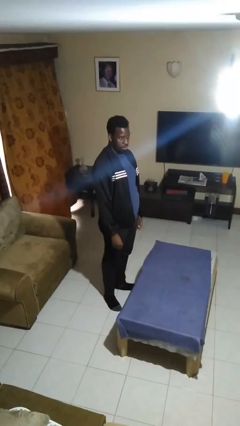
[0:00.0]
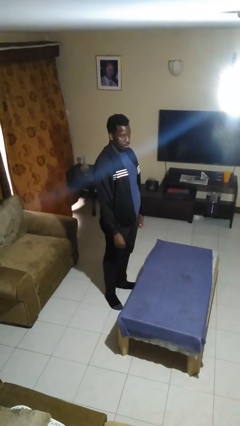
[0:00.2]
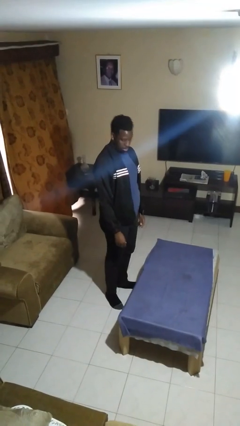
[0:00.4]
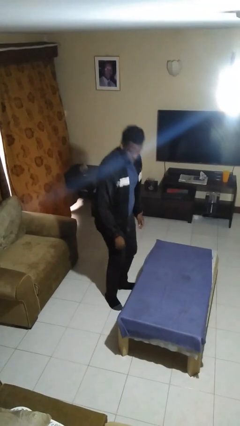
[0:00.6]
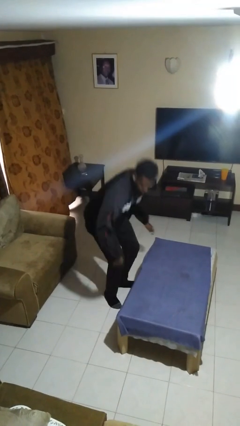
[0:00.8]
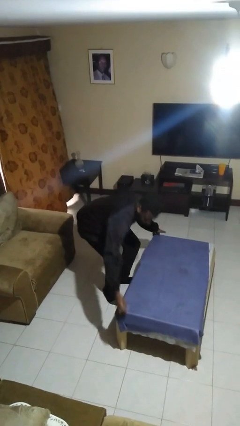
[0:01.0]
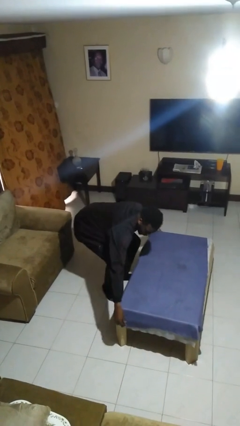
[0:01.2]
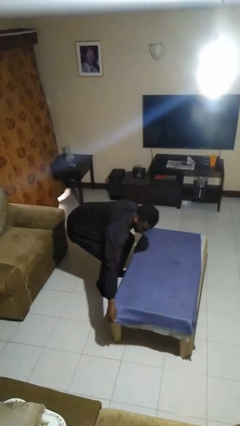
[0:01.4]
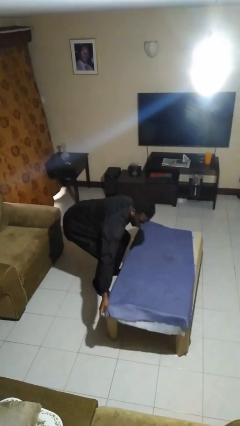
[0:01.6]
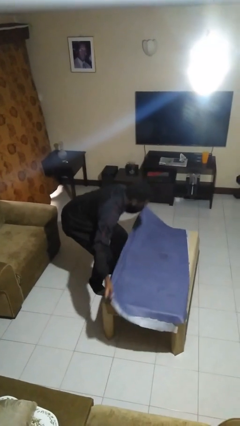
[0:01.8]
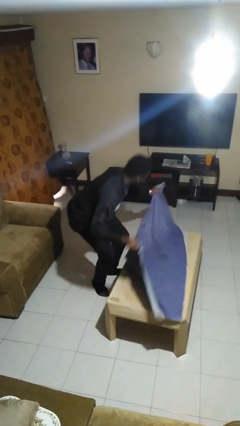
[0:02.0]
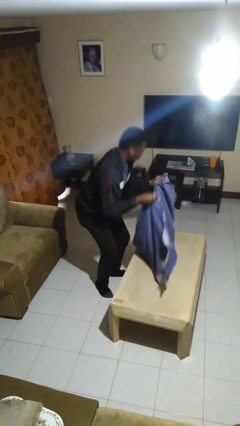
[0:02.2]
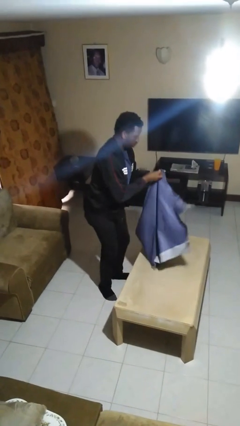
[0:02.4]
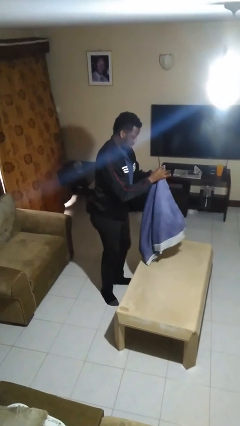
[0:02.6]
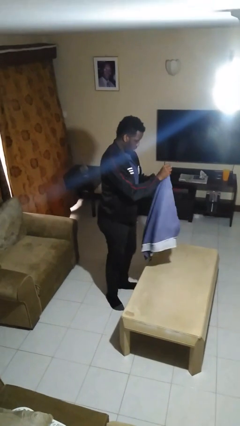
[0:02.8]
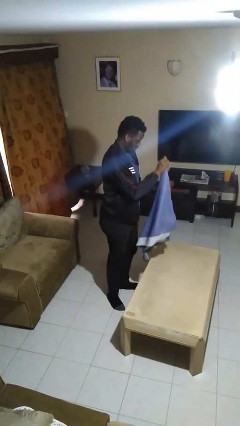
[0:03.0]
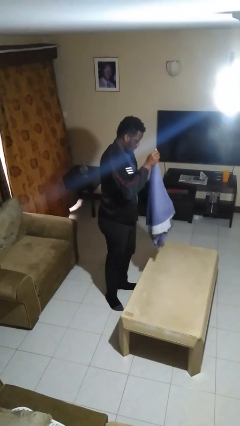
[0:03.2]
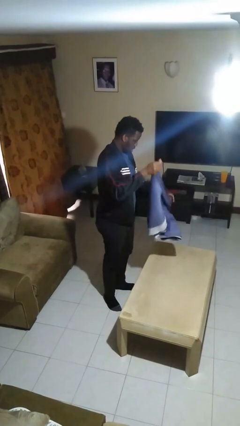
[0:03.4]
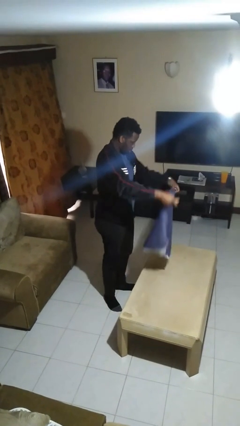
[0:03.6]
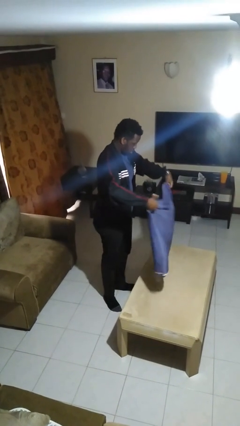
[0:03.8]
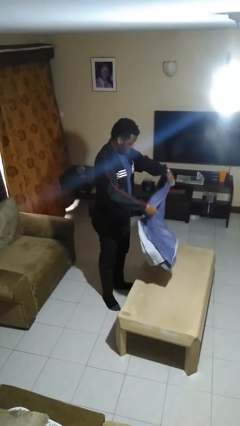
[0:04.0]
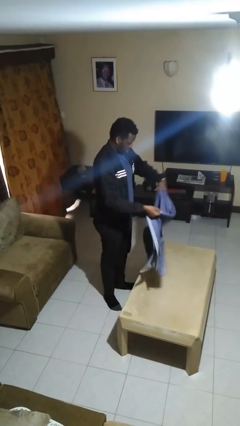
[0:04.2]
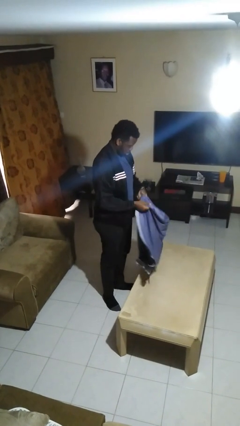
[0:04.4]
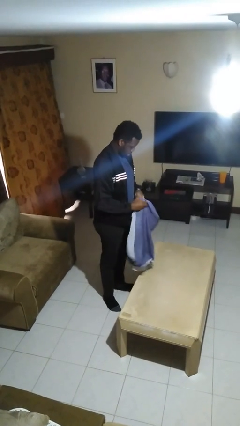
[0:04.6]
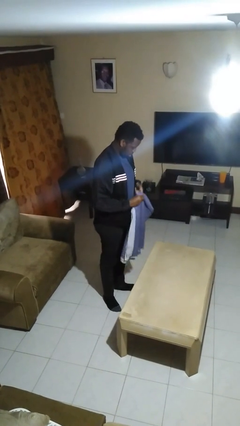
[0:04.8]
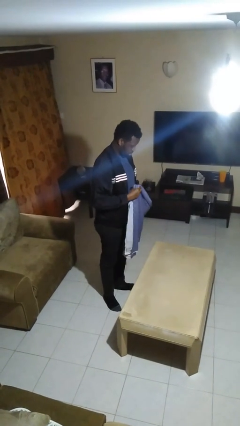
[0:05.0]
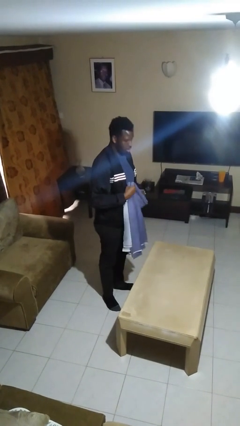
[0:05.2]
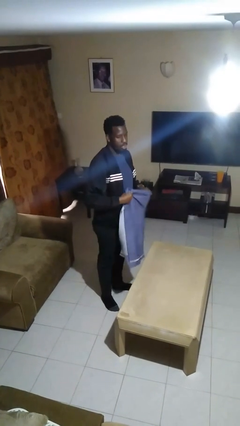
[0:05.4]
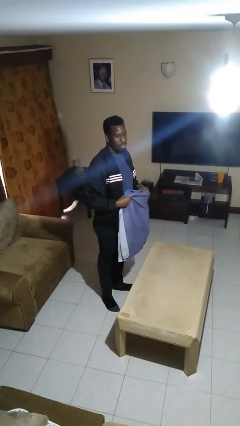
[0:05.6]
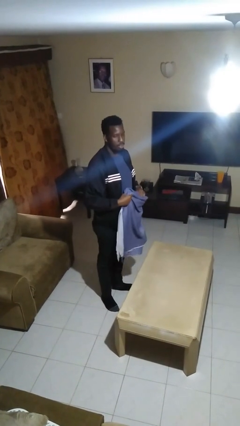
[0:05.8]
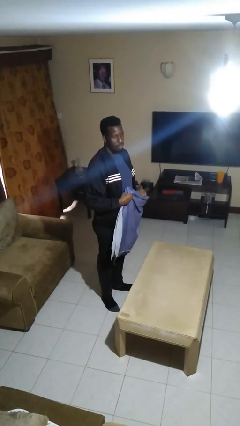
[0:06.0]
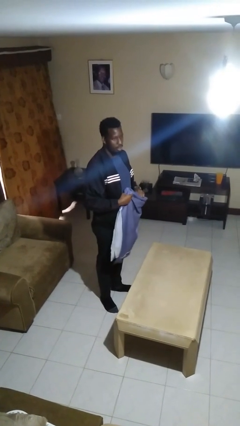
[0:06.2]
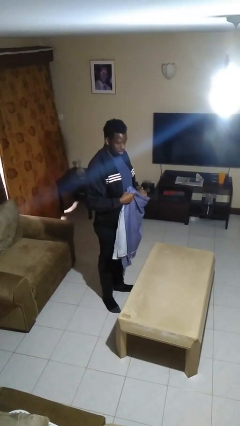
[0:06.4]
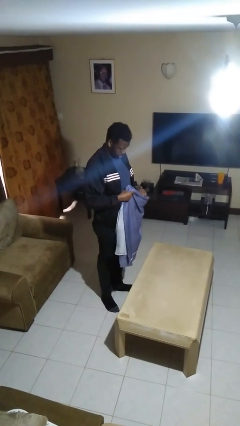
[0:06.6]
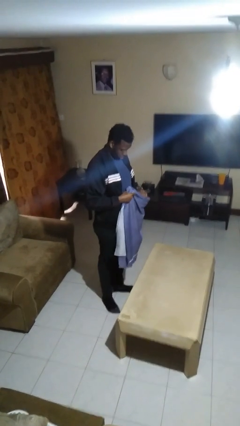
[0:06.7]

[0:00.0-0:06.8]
person unfolds blanket

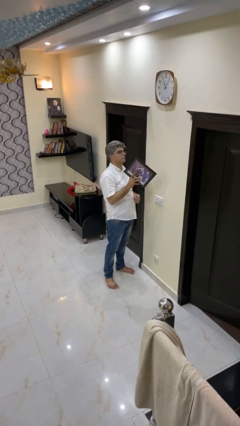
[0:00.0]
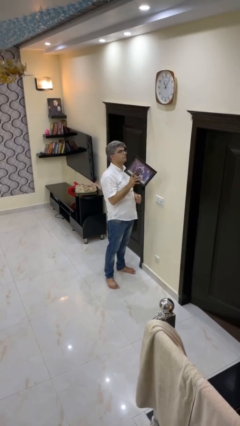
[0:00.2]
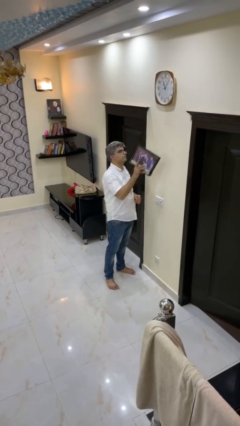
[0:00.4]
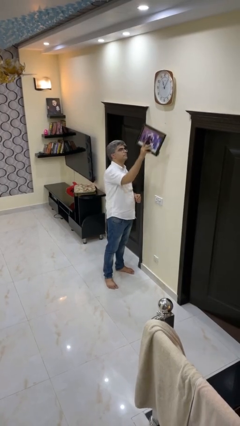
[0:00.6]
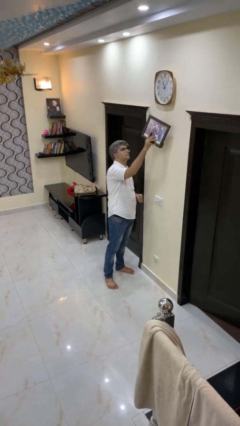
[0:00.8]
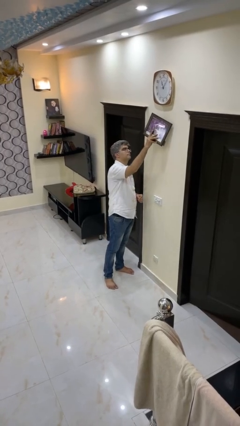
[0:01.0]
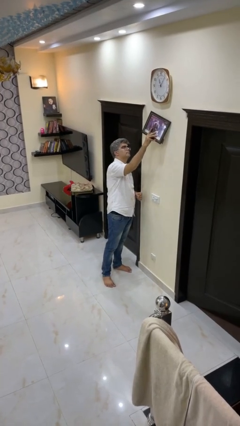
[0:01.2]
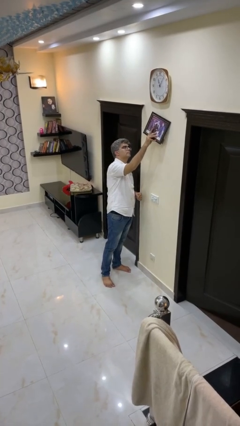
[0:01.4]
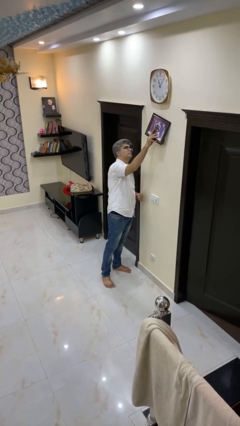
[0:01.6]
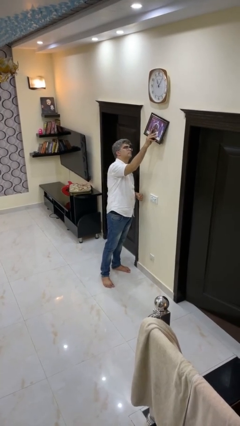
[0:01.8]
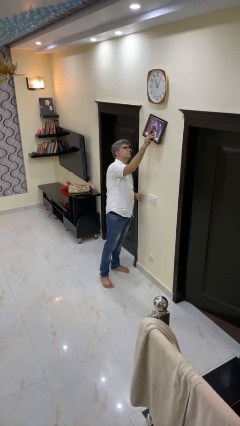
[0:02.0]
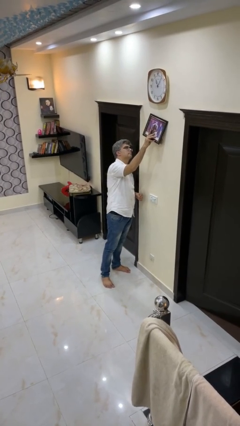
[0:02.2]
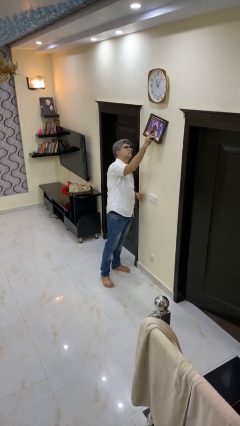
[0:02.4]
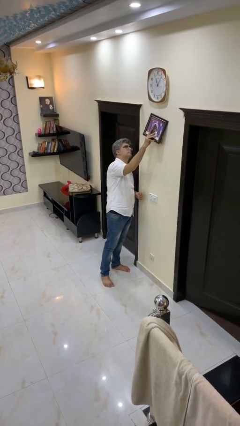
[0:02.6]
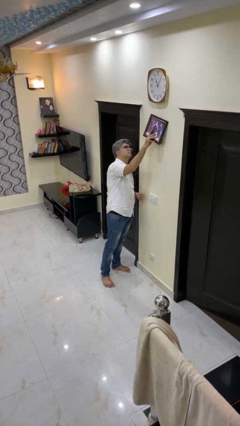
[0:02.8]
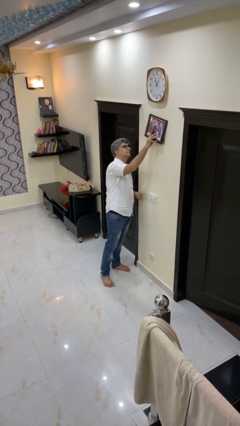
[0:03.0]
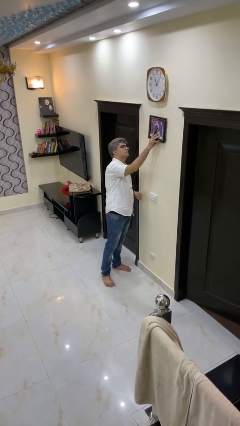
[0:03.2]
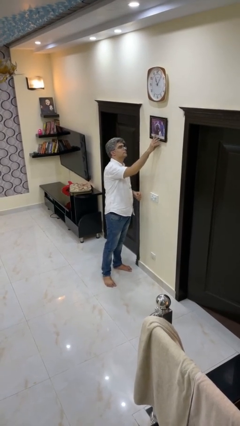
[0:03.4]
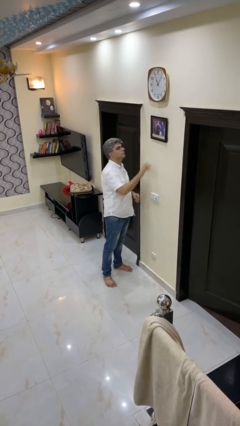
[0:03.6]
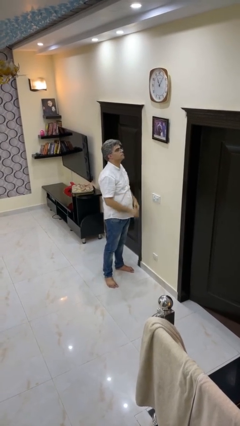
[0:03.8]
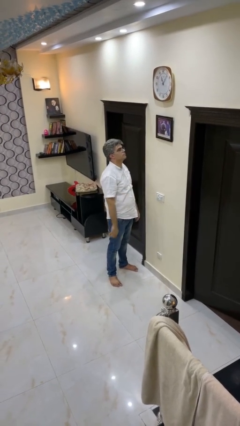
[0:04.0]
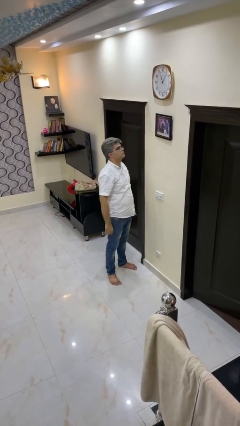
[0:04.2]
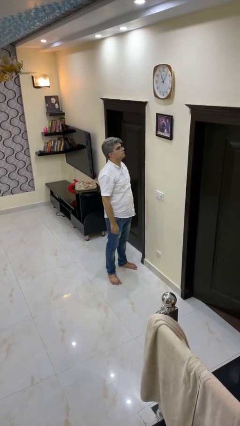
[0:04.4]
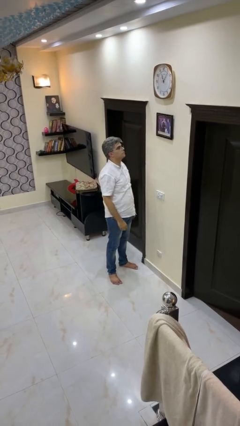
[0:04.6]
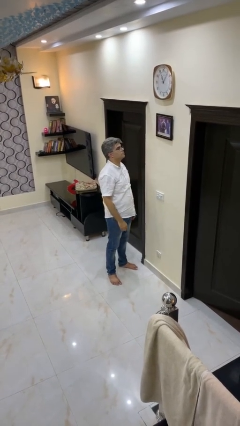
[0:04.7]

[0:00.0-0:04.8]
person puts up picture frame

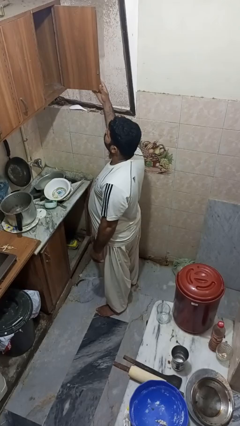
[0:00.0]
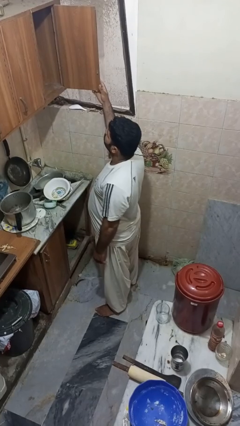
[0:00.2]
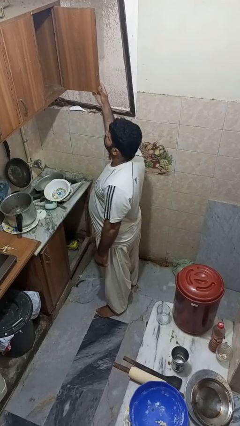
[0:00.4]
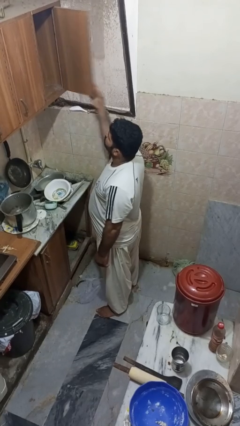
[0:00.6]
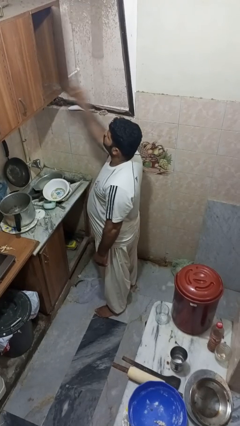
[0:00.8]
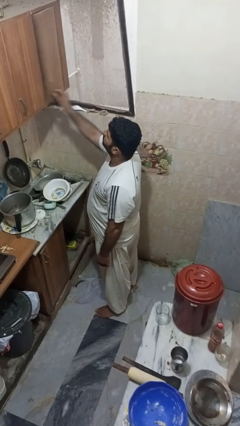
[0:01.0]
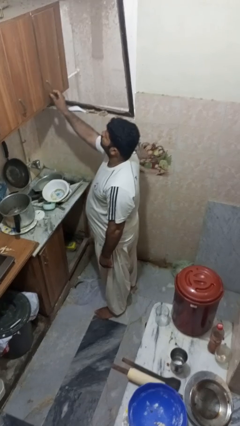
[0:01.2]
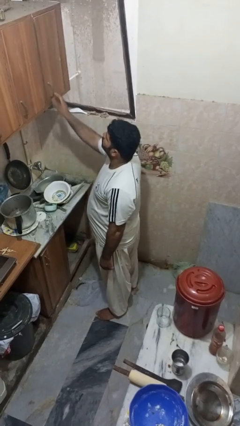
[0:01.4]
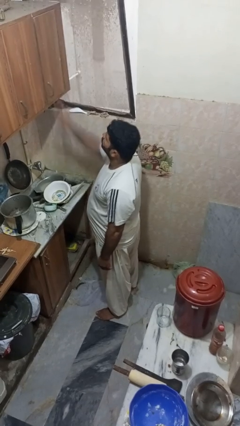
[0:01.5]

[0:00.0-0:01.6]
person closes cabinet

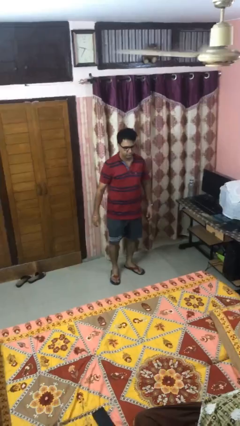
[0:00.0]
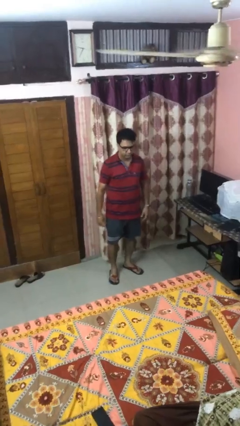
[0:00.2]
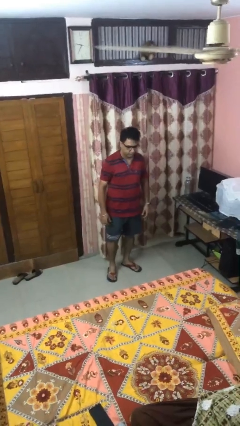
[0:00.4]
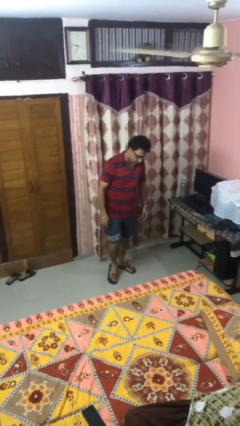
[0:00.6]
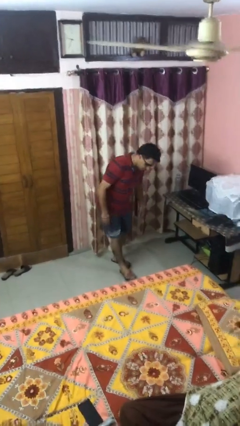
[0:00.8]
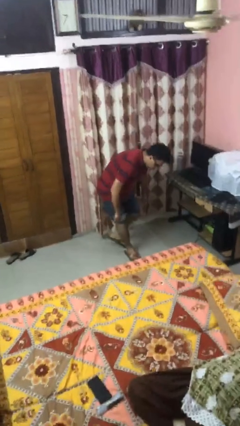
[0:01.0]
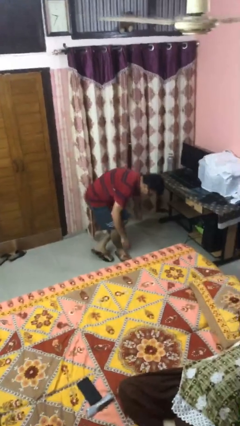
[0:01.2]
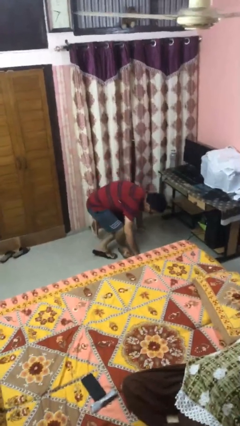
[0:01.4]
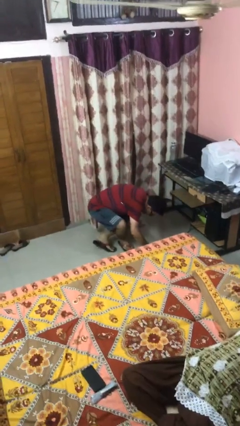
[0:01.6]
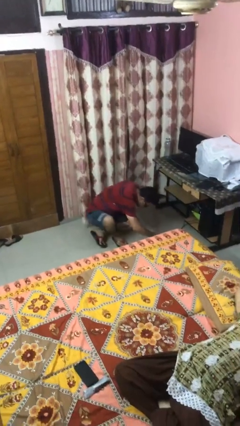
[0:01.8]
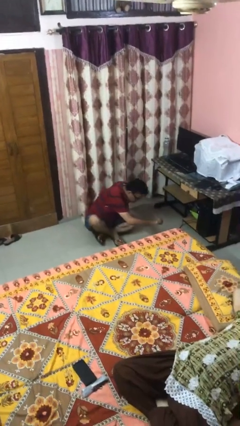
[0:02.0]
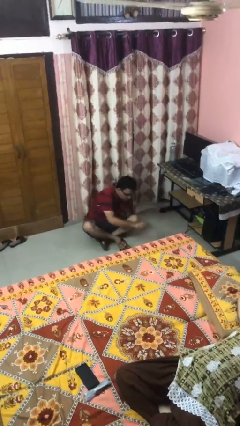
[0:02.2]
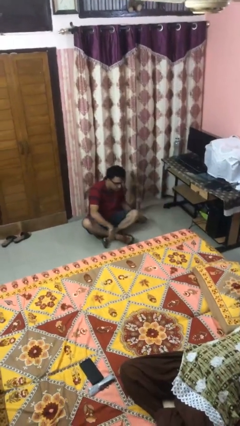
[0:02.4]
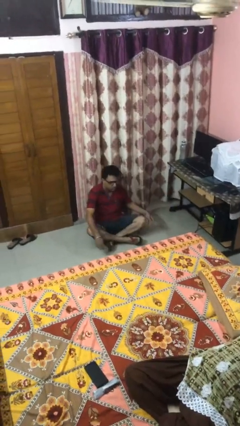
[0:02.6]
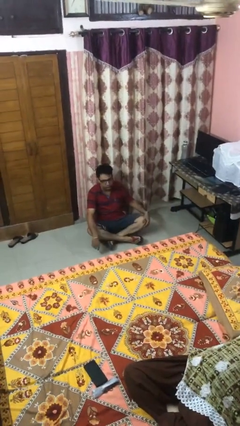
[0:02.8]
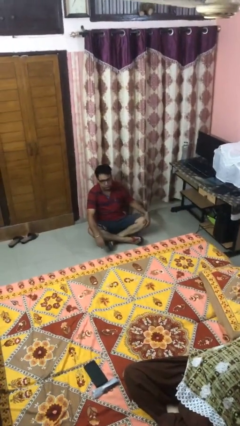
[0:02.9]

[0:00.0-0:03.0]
person sits crisscross

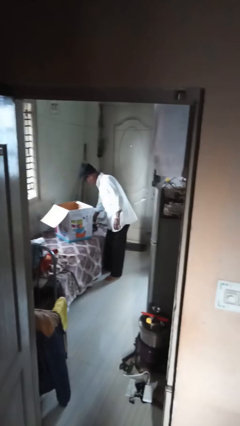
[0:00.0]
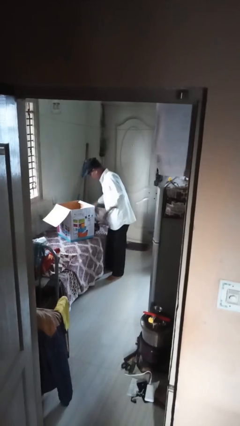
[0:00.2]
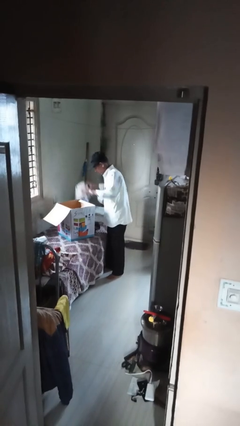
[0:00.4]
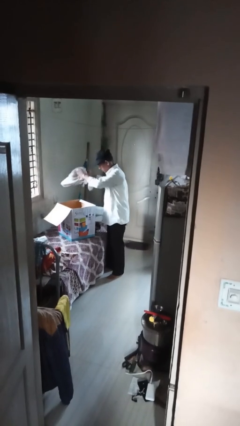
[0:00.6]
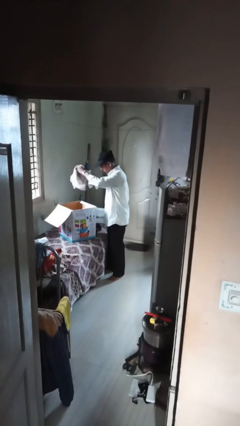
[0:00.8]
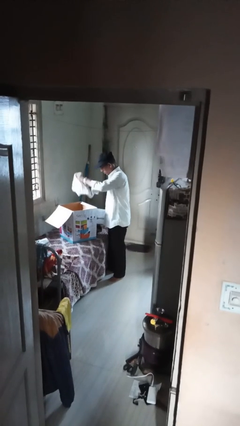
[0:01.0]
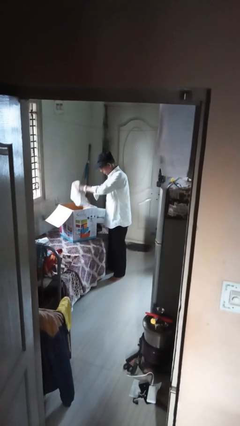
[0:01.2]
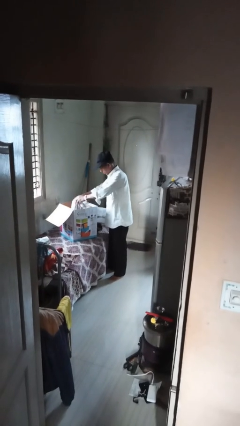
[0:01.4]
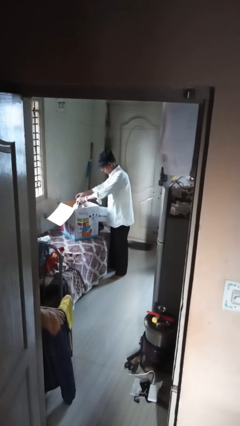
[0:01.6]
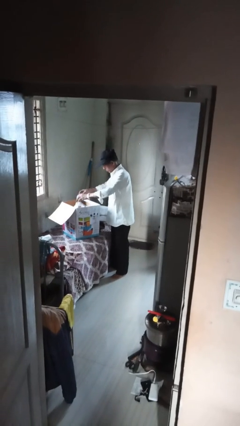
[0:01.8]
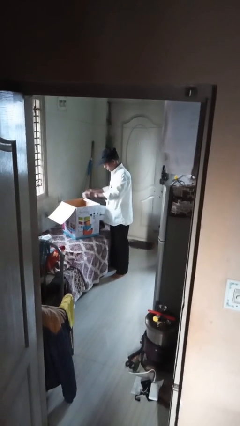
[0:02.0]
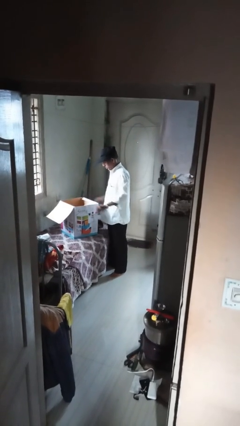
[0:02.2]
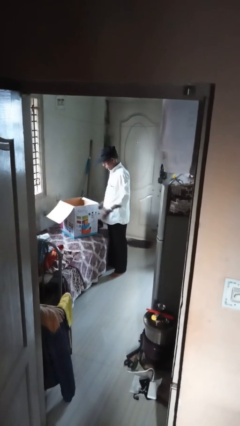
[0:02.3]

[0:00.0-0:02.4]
person puts object into box
